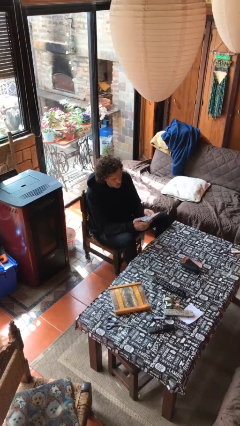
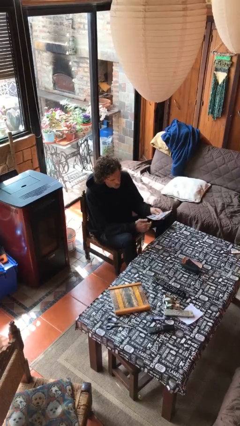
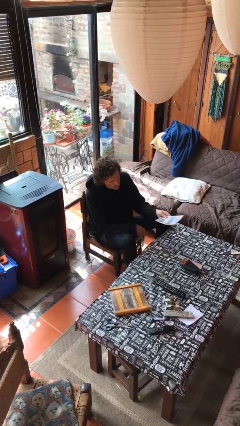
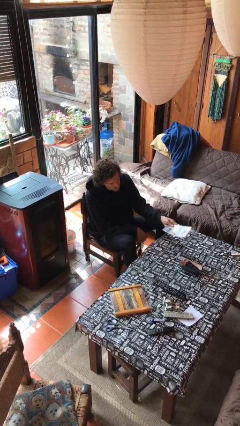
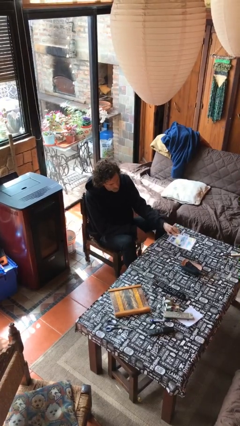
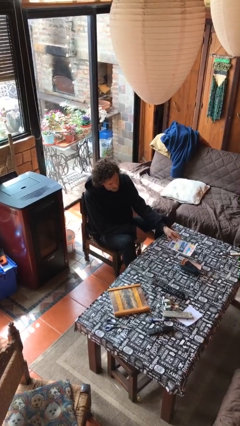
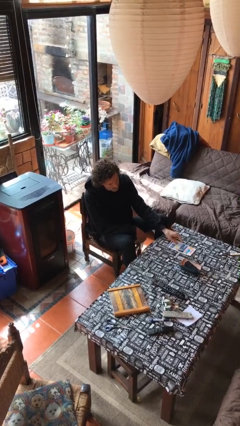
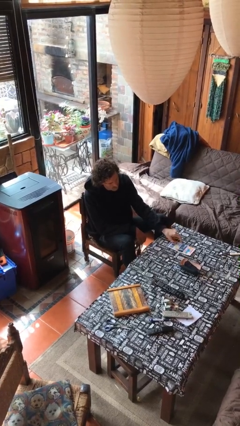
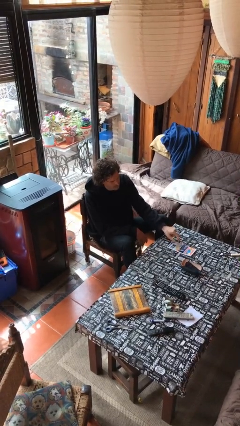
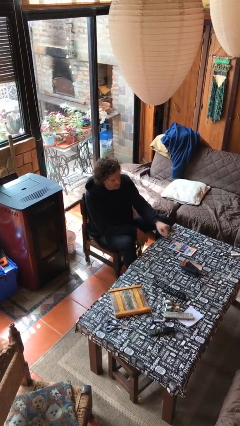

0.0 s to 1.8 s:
person puts down object on table

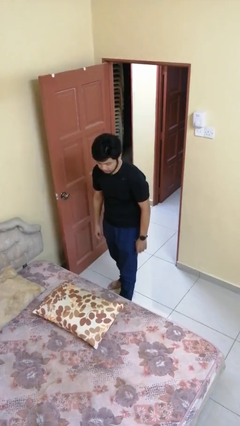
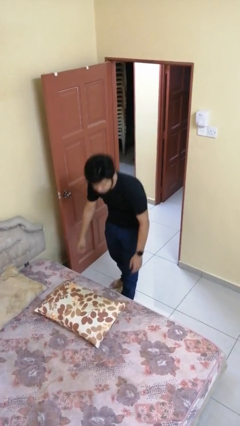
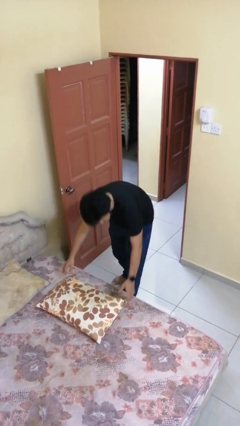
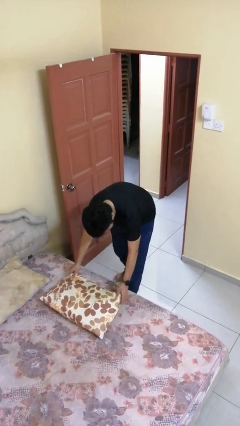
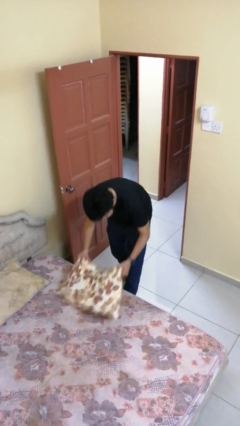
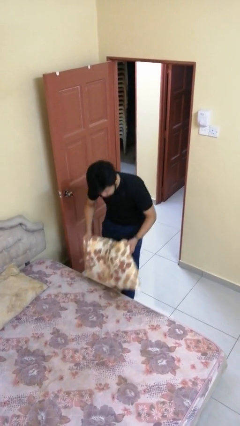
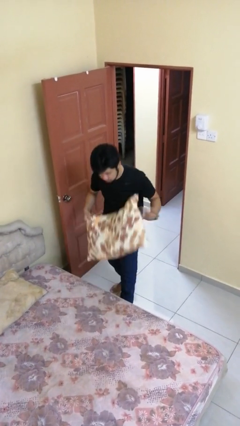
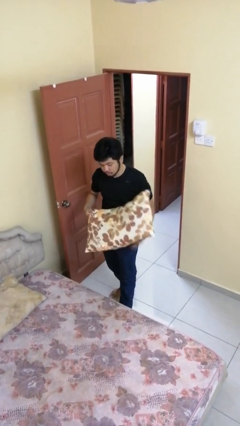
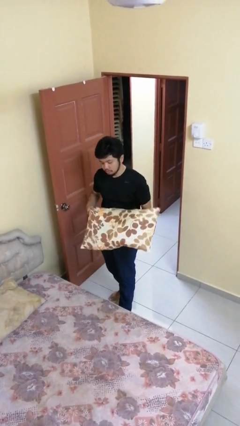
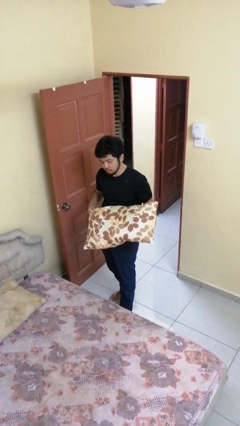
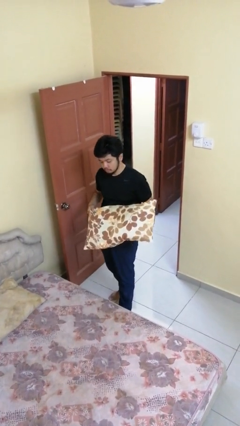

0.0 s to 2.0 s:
person picks up object from bed

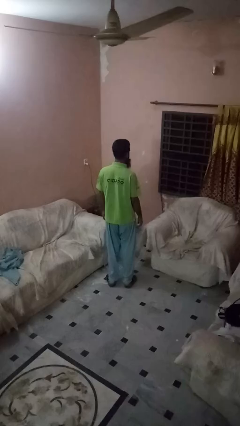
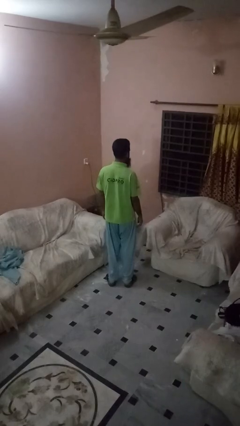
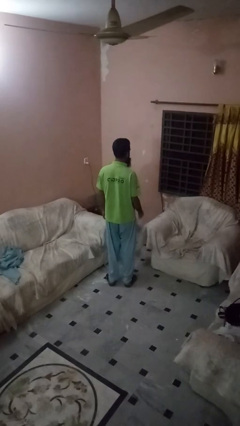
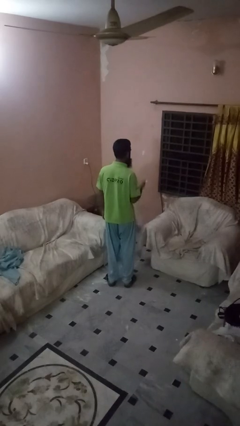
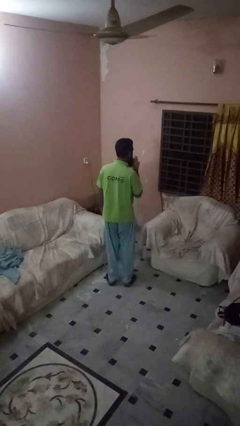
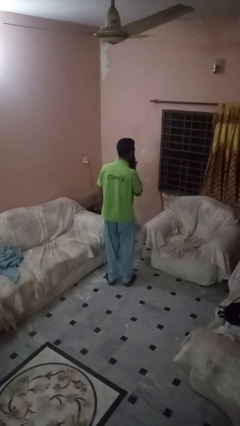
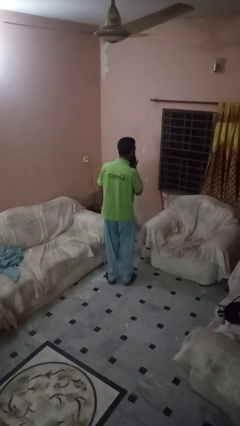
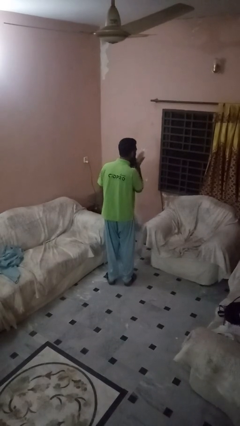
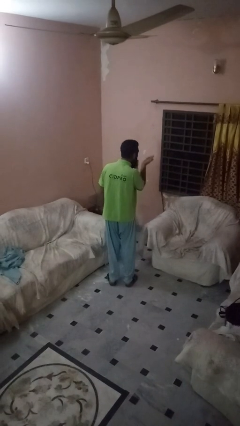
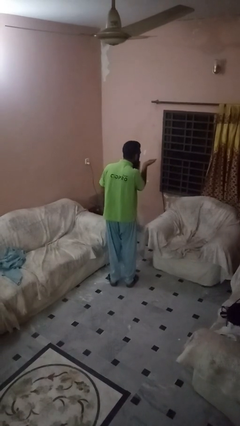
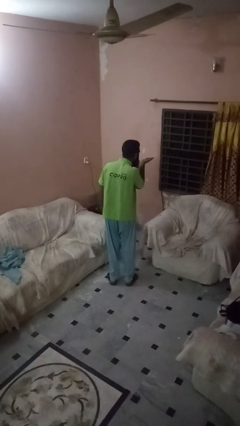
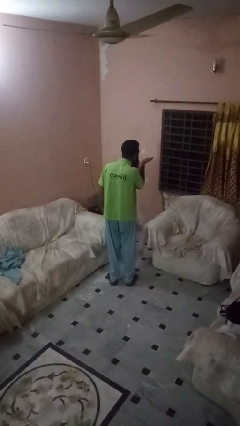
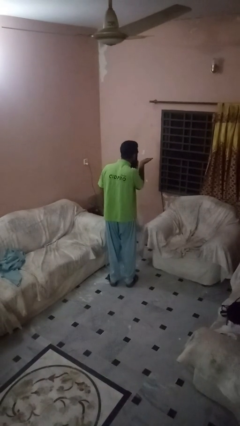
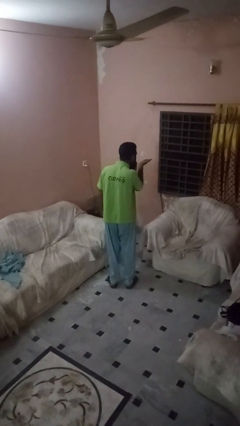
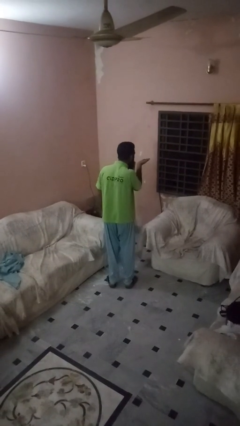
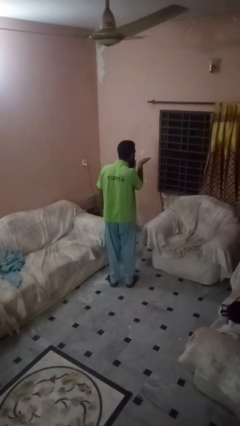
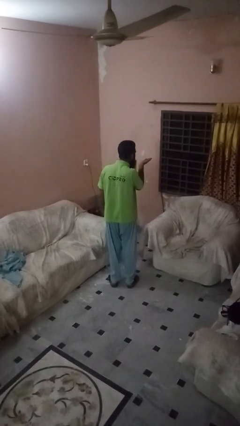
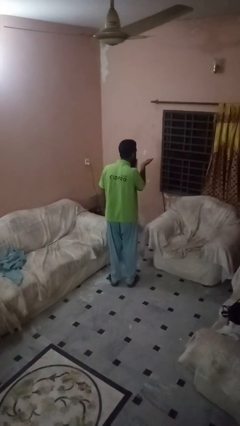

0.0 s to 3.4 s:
person gestures blow kiss

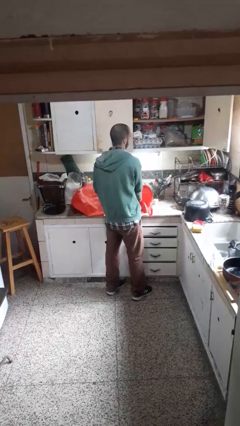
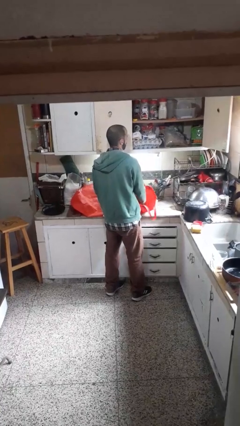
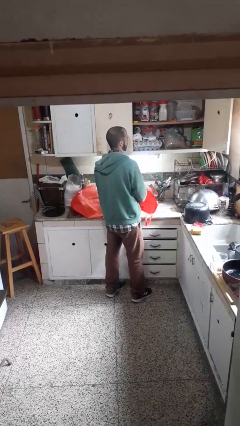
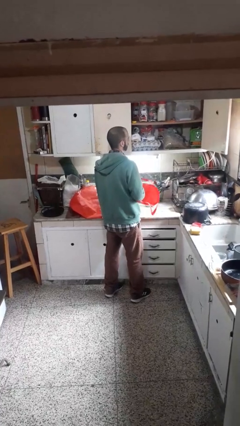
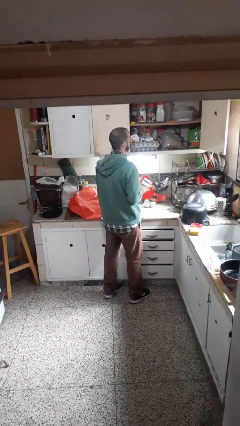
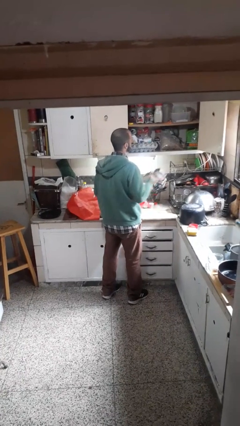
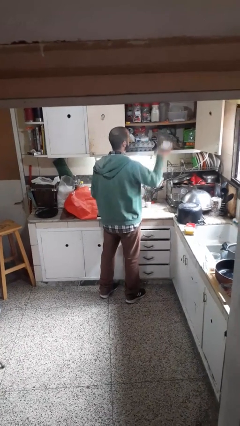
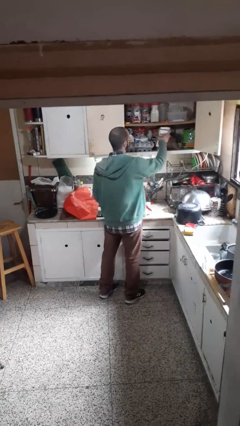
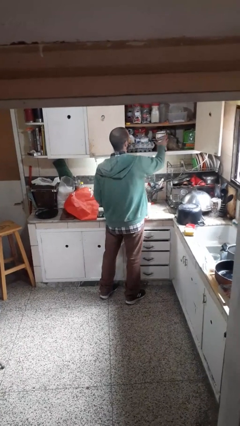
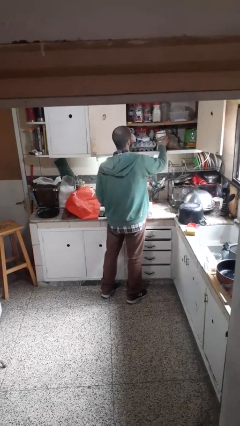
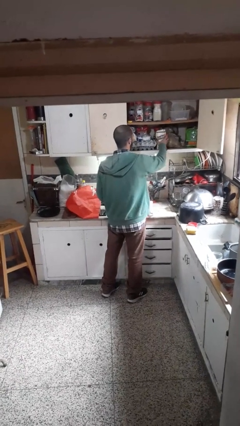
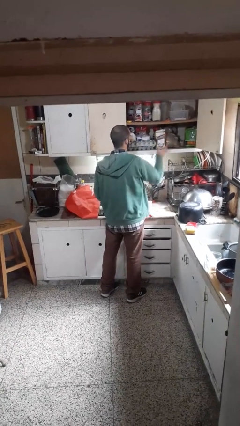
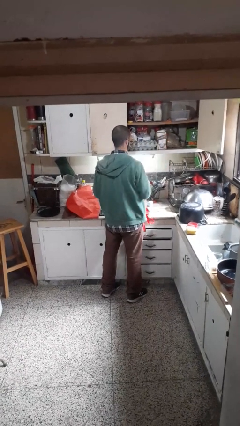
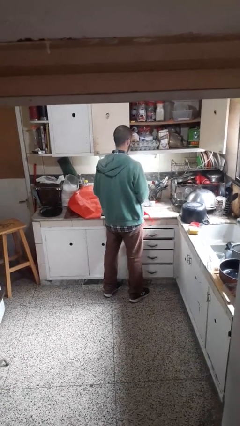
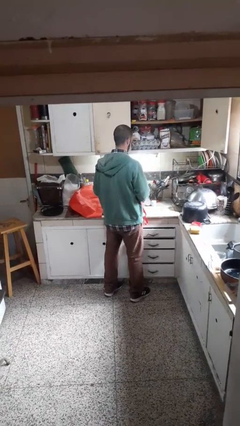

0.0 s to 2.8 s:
person loads groceries into cabinet

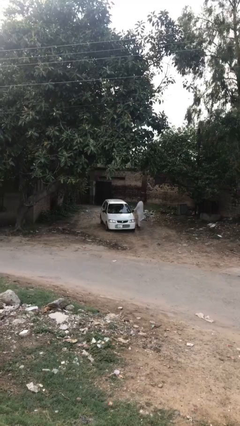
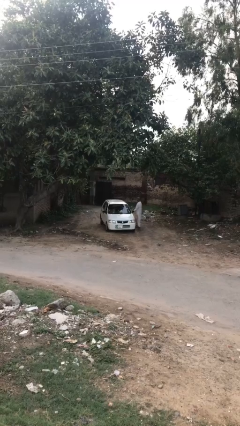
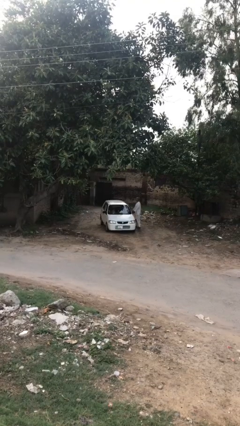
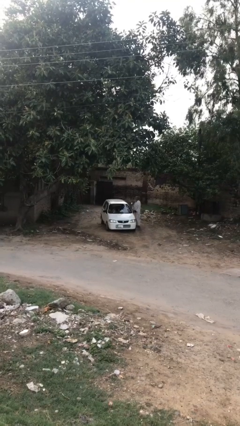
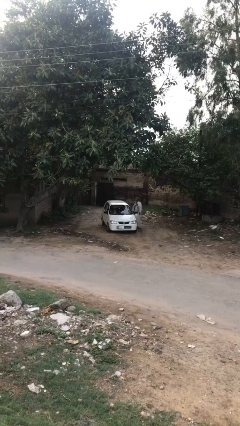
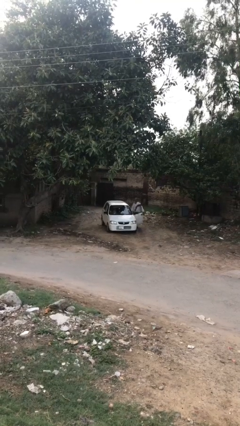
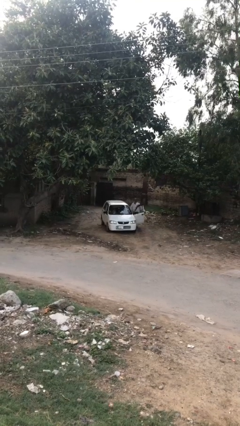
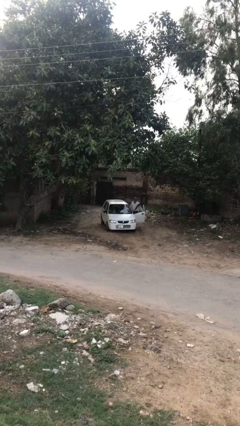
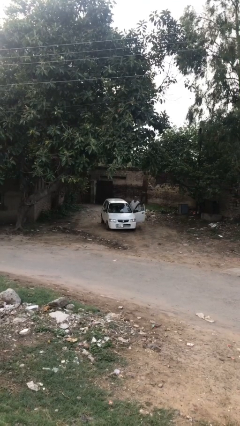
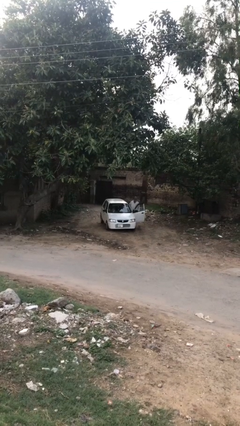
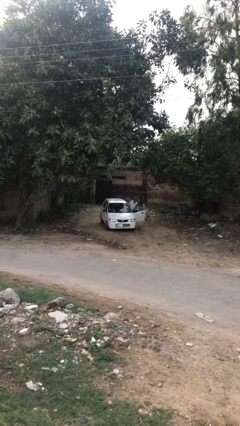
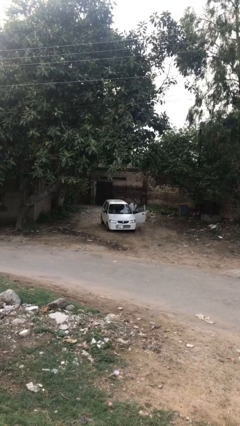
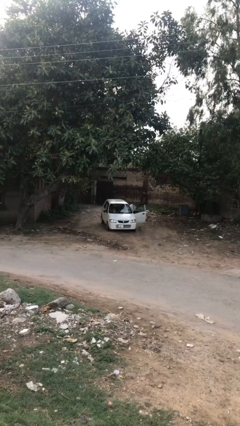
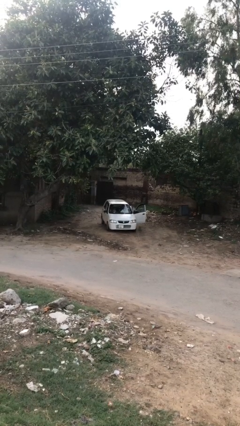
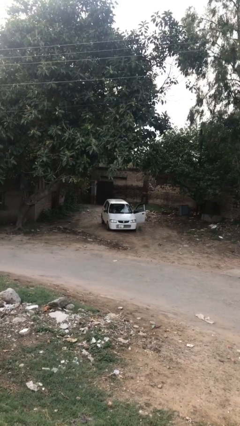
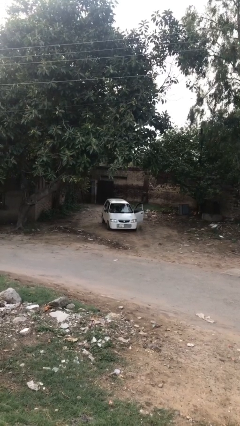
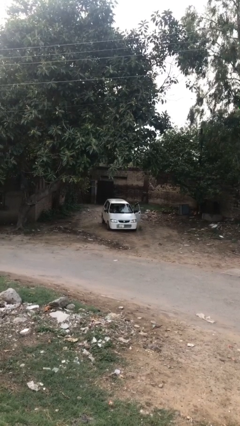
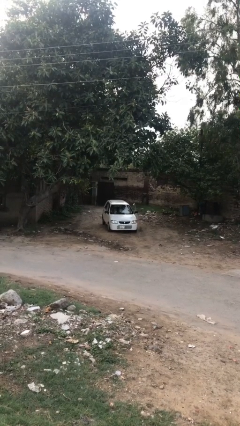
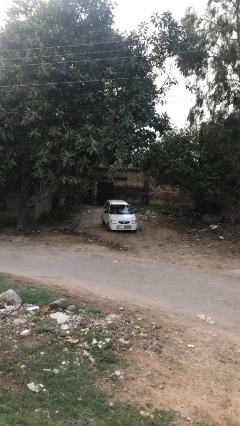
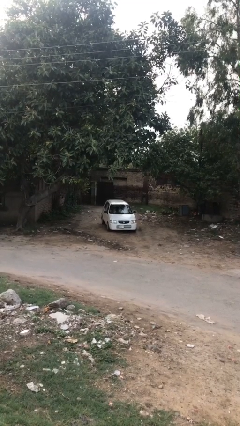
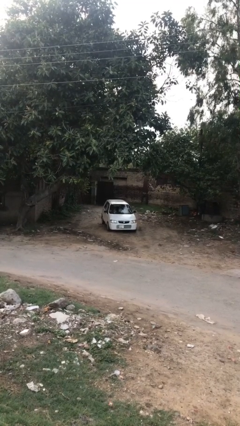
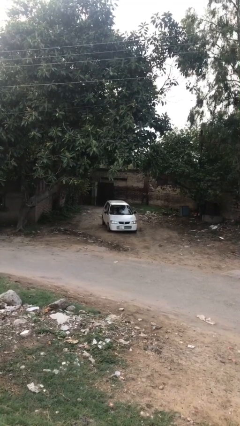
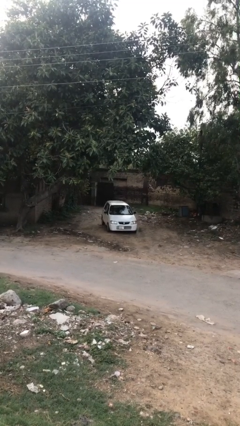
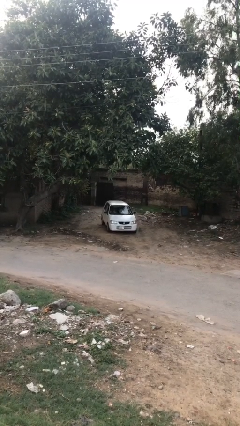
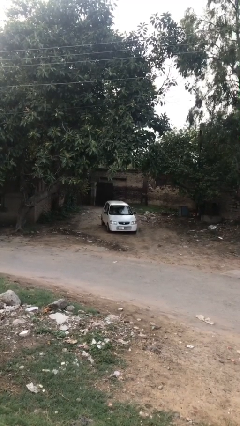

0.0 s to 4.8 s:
car picks up person

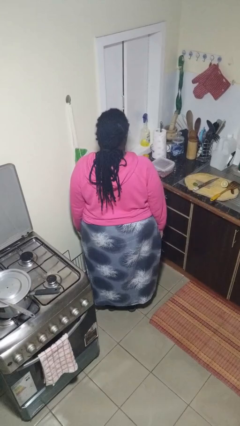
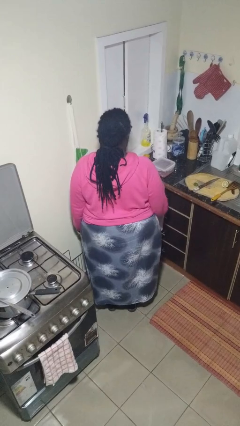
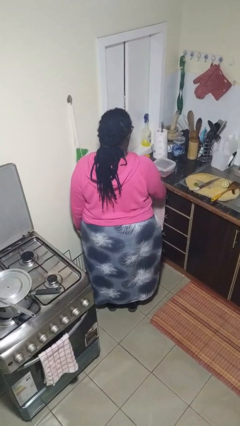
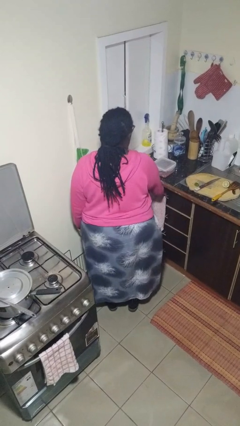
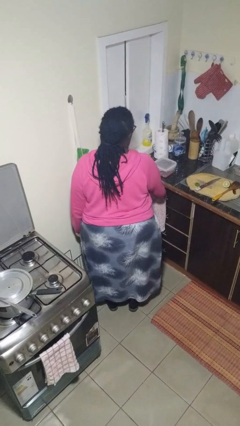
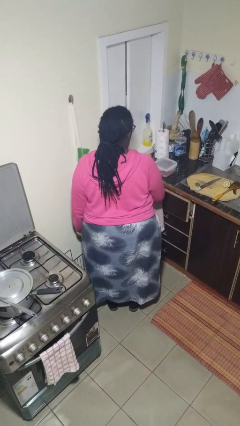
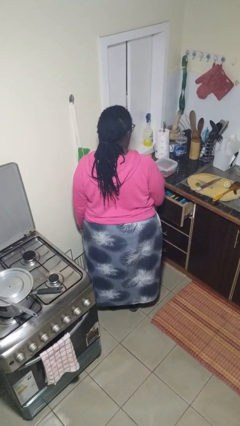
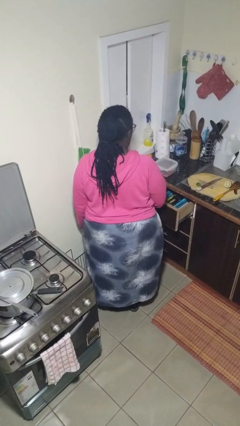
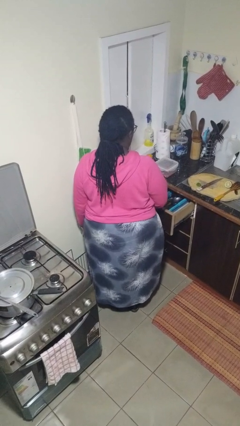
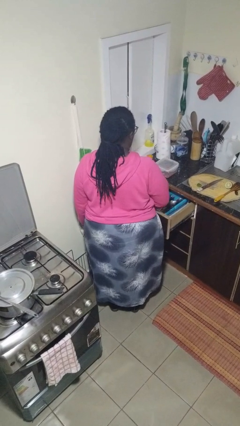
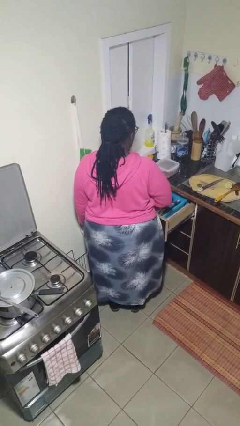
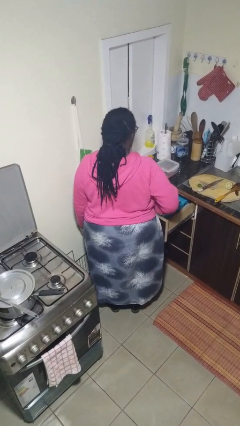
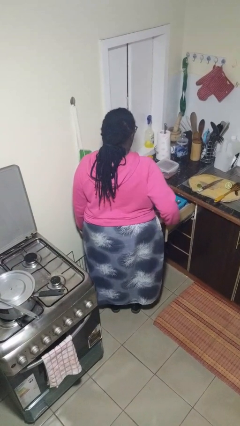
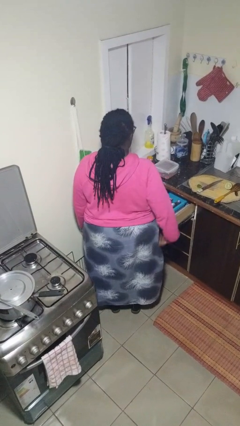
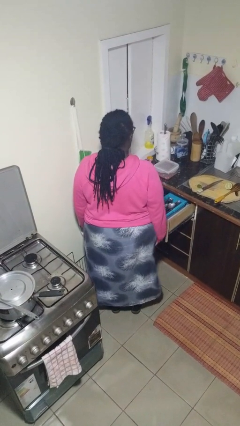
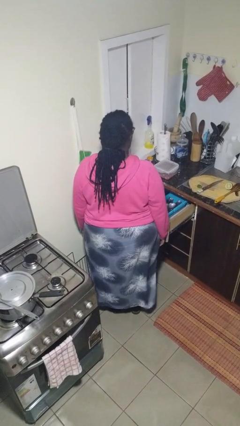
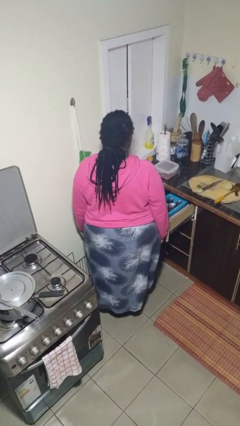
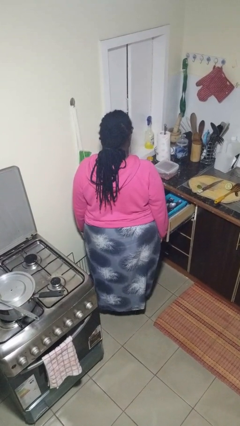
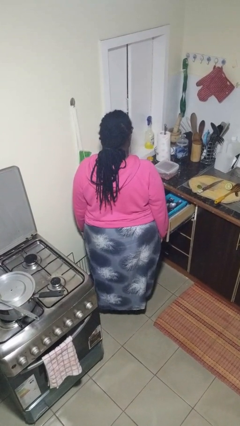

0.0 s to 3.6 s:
person opens kitchen drawer
